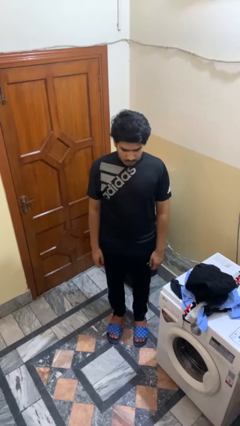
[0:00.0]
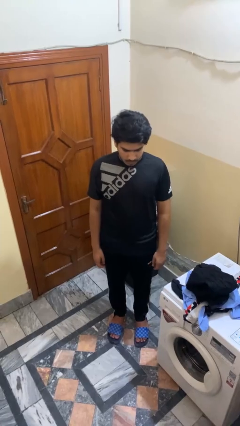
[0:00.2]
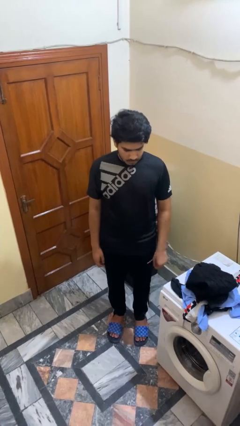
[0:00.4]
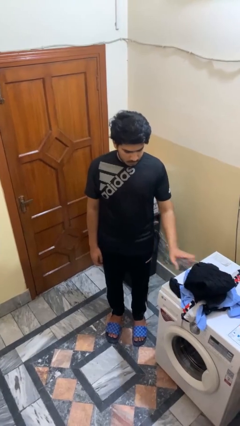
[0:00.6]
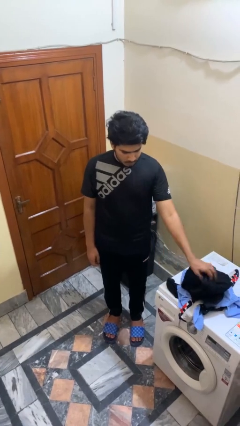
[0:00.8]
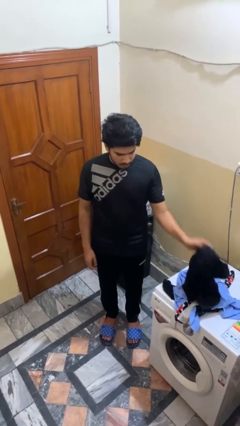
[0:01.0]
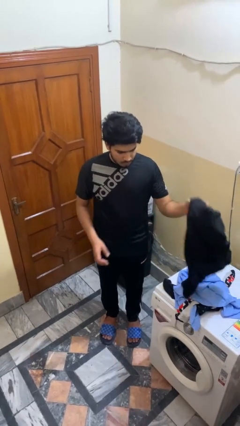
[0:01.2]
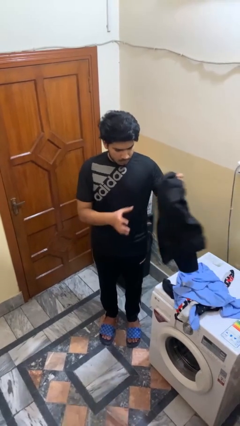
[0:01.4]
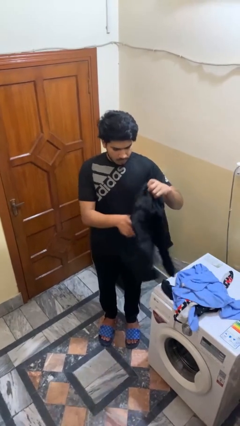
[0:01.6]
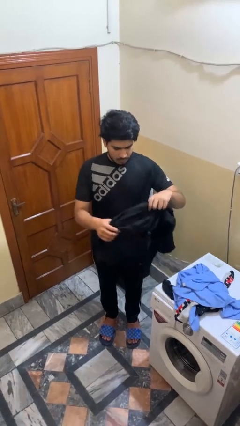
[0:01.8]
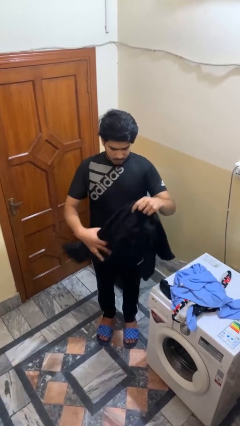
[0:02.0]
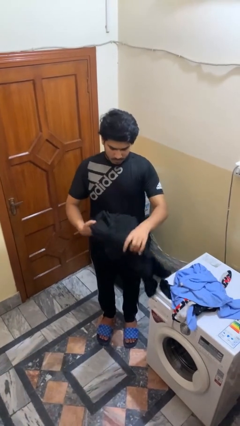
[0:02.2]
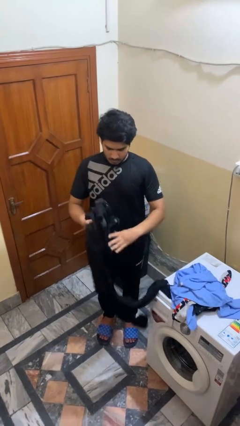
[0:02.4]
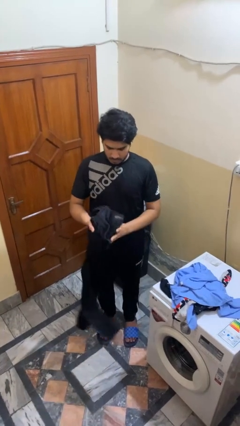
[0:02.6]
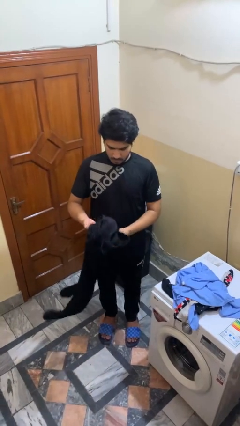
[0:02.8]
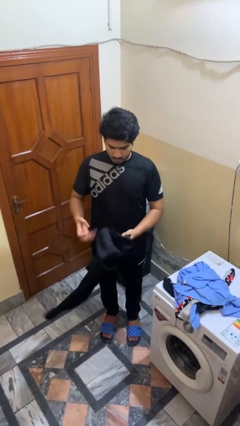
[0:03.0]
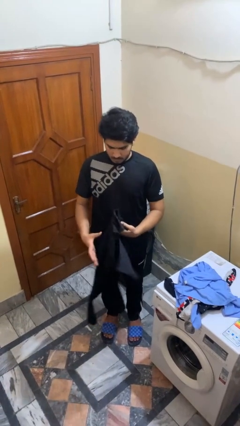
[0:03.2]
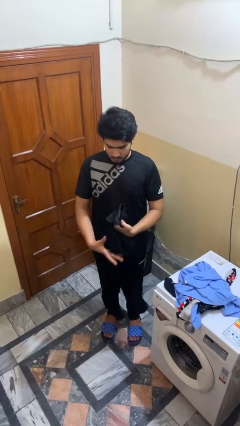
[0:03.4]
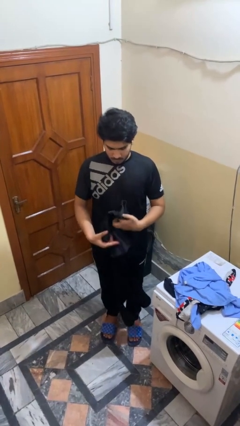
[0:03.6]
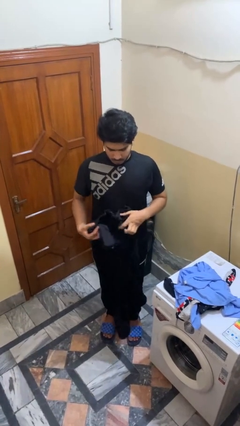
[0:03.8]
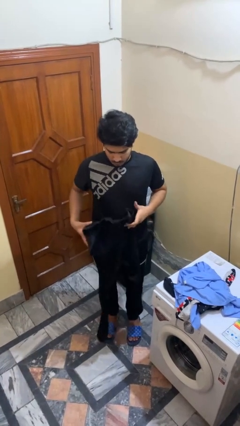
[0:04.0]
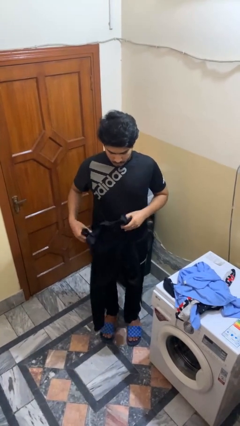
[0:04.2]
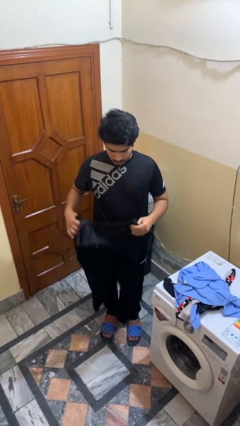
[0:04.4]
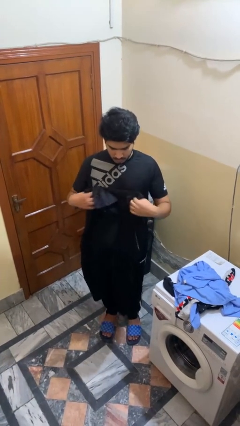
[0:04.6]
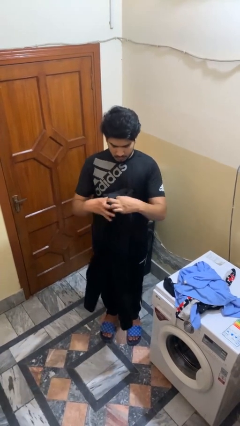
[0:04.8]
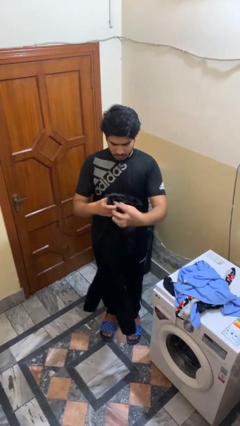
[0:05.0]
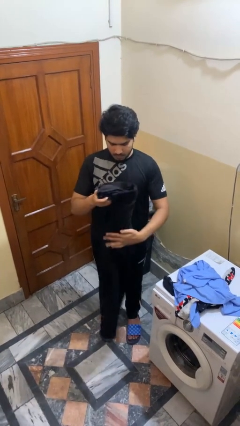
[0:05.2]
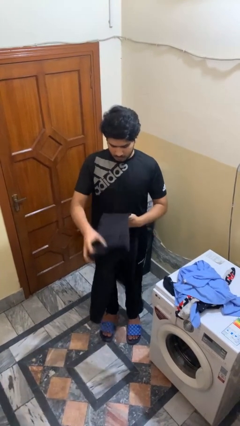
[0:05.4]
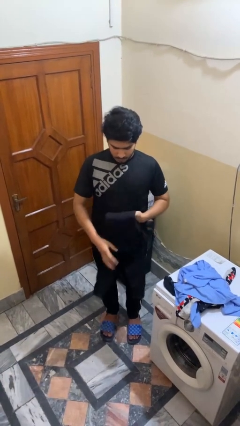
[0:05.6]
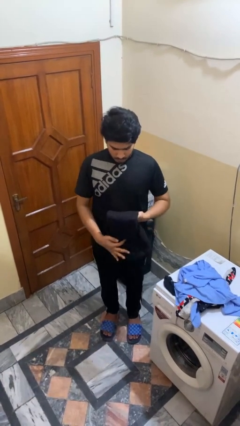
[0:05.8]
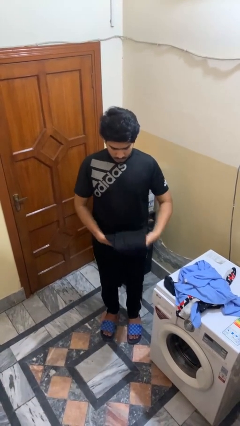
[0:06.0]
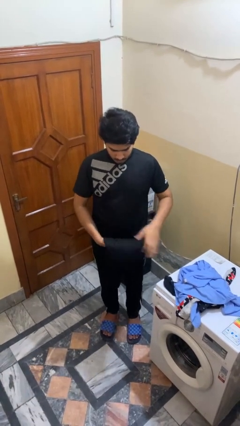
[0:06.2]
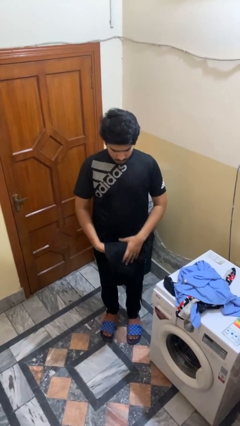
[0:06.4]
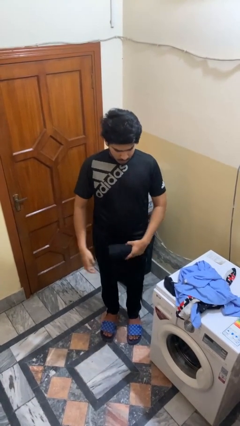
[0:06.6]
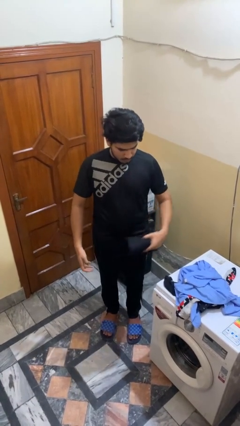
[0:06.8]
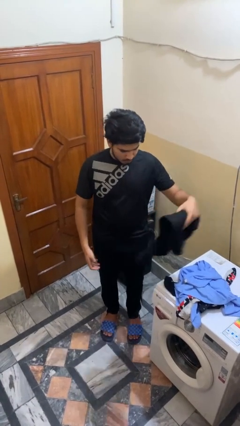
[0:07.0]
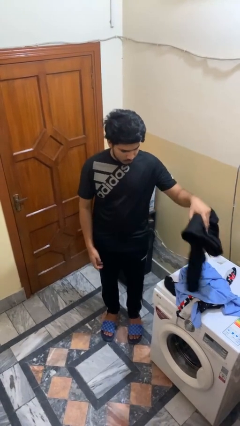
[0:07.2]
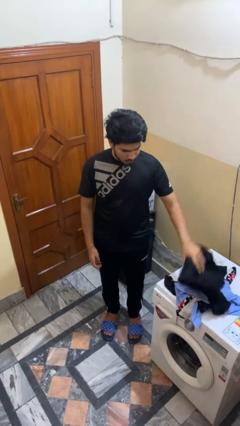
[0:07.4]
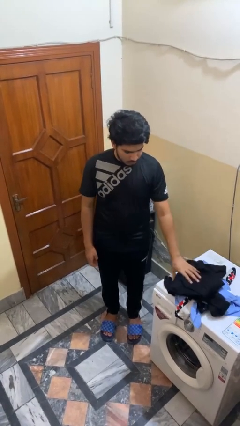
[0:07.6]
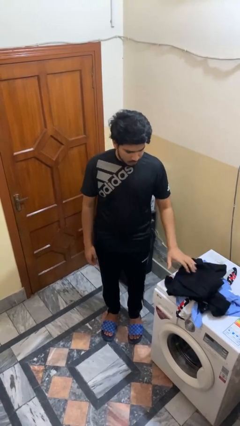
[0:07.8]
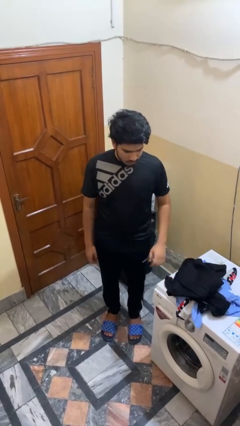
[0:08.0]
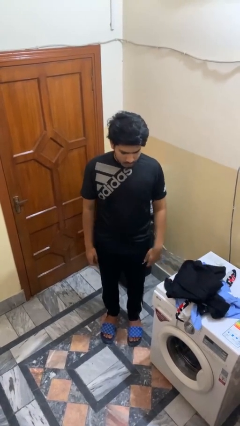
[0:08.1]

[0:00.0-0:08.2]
person folds pants

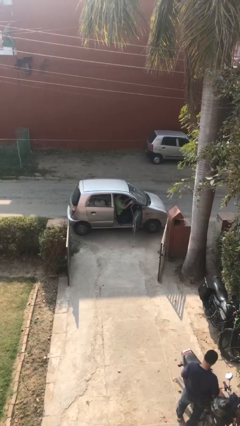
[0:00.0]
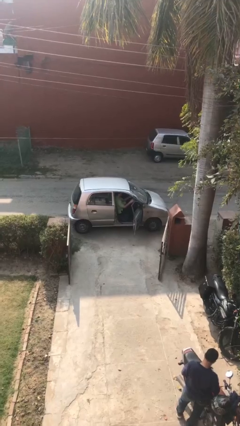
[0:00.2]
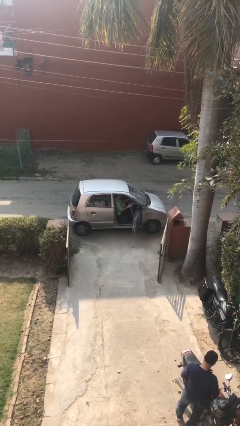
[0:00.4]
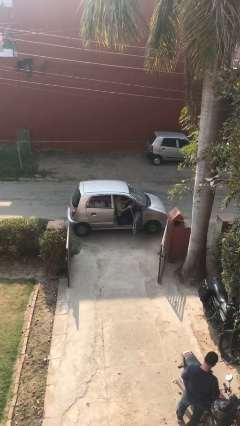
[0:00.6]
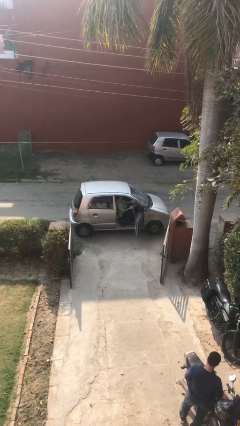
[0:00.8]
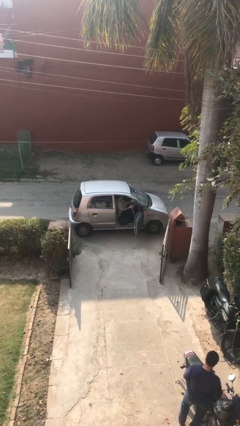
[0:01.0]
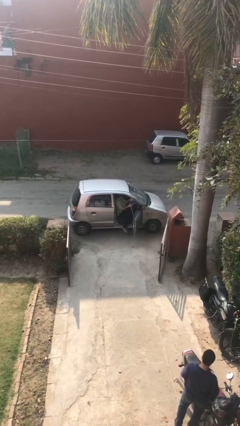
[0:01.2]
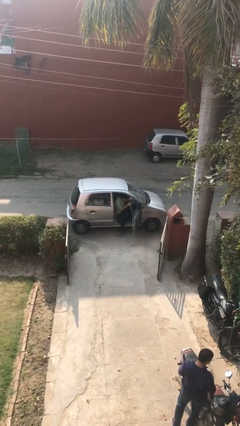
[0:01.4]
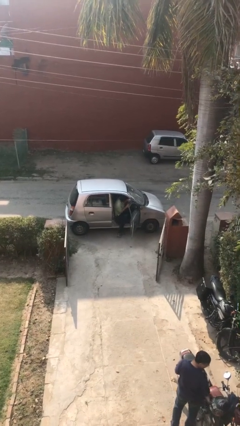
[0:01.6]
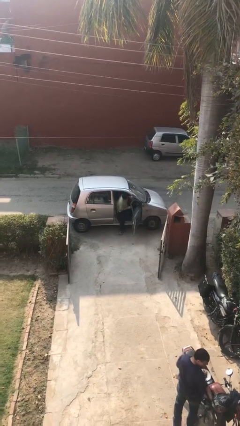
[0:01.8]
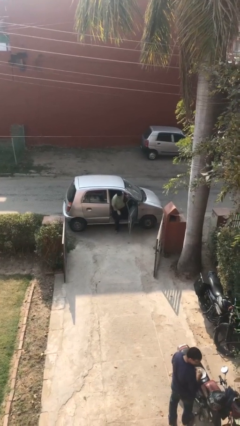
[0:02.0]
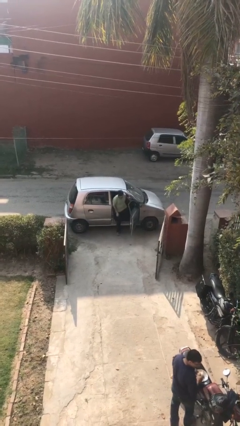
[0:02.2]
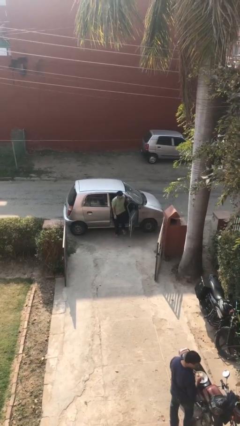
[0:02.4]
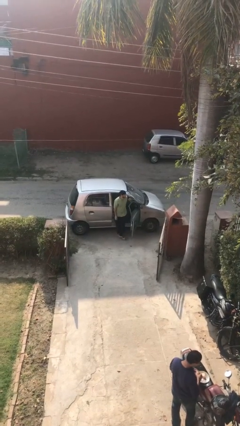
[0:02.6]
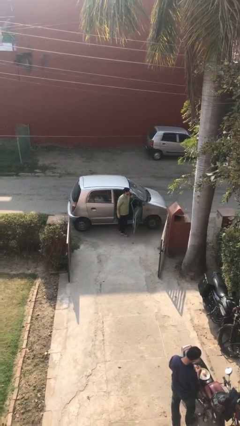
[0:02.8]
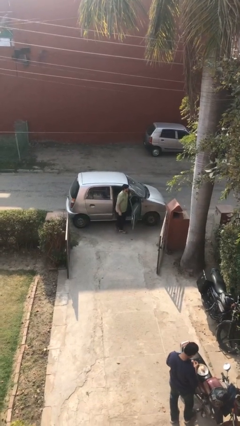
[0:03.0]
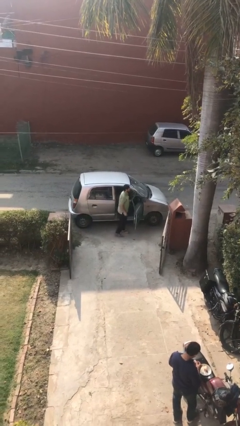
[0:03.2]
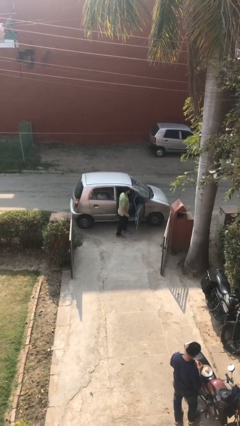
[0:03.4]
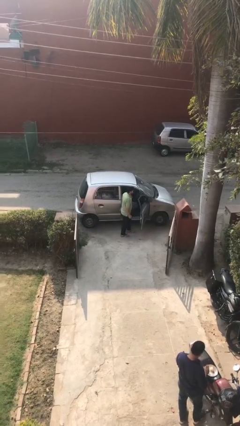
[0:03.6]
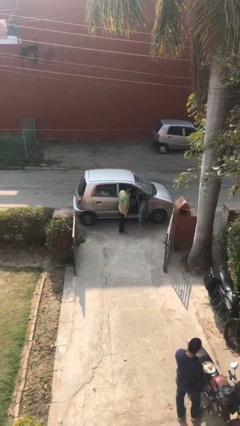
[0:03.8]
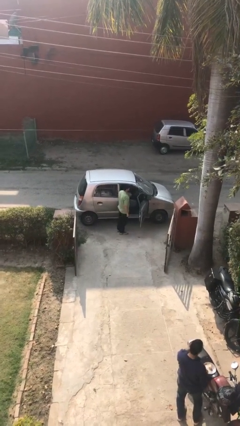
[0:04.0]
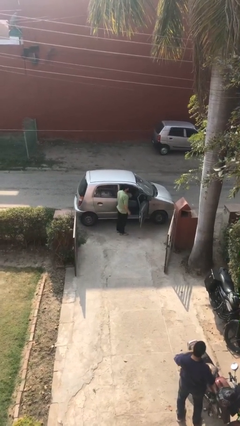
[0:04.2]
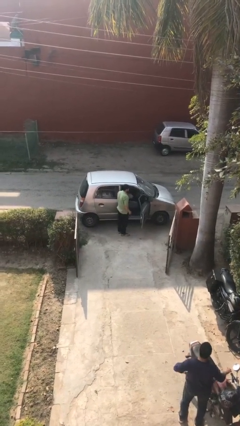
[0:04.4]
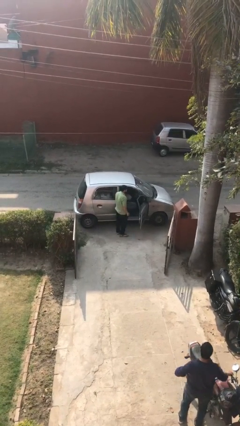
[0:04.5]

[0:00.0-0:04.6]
person exits car

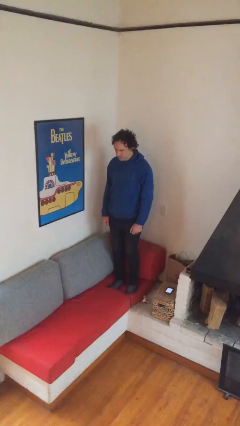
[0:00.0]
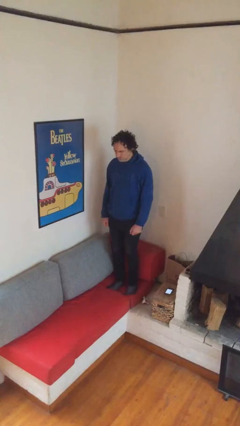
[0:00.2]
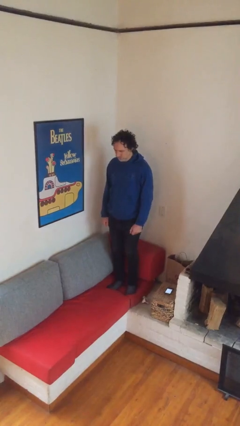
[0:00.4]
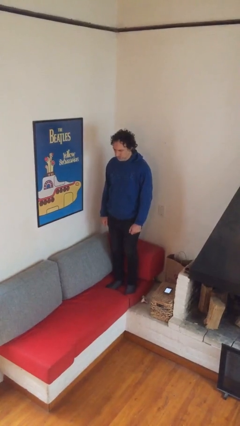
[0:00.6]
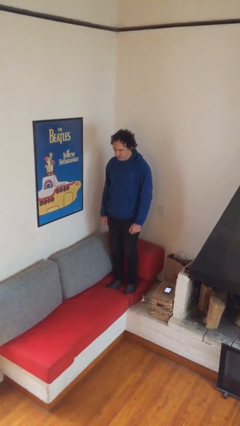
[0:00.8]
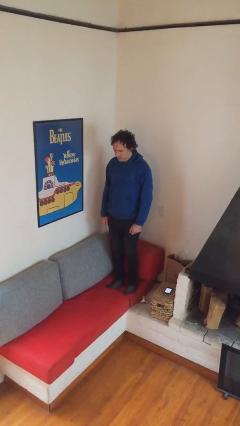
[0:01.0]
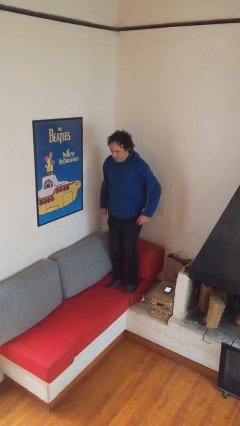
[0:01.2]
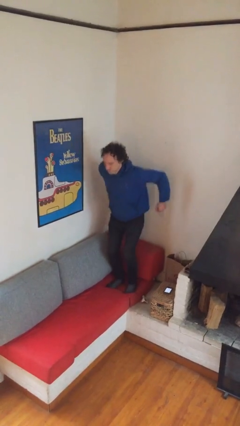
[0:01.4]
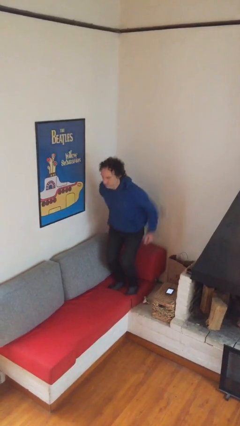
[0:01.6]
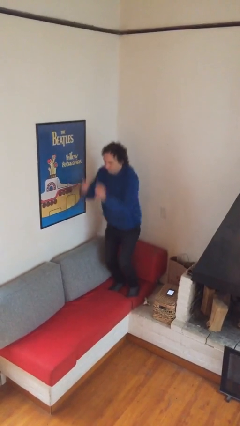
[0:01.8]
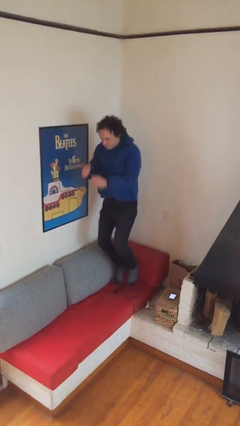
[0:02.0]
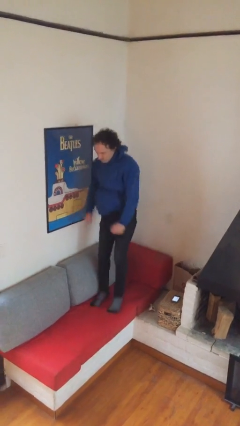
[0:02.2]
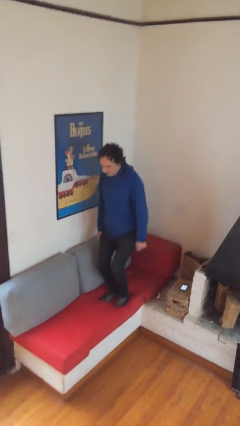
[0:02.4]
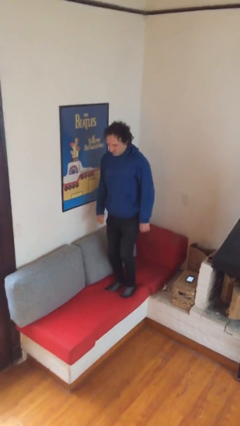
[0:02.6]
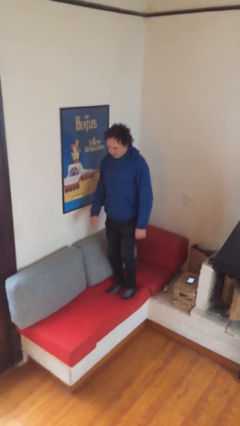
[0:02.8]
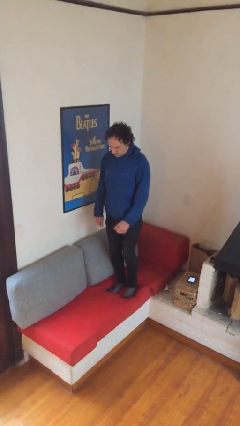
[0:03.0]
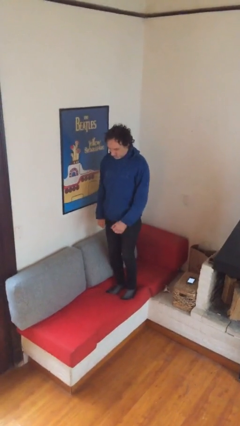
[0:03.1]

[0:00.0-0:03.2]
person jumps on couch

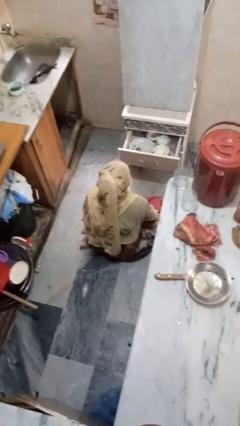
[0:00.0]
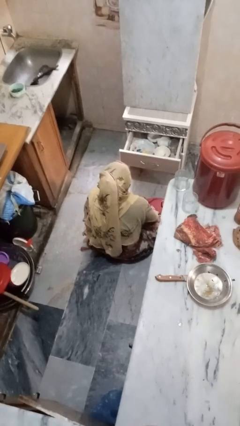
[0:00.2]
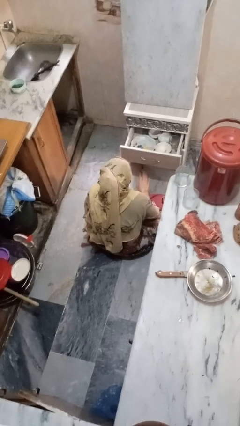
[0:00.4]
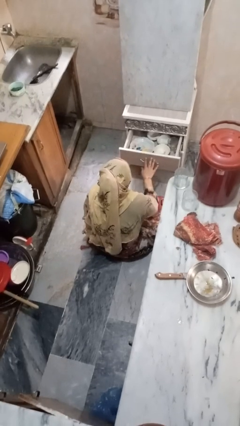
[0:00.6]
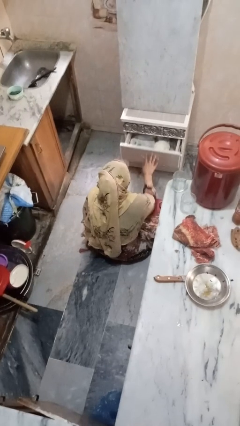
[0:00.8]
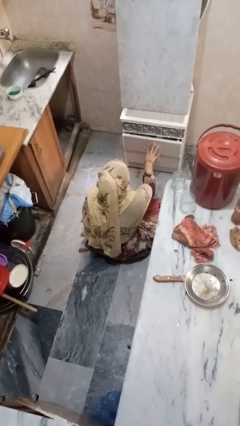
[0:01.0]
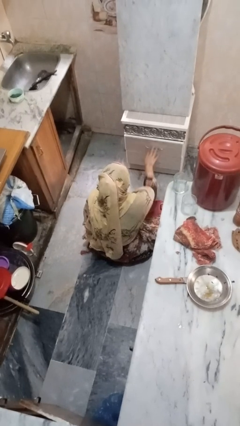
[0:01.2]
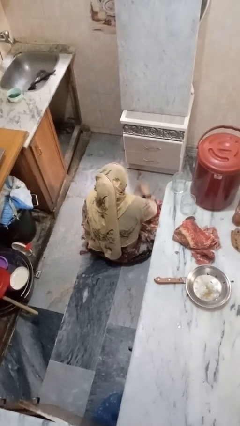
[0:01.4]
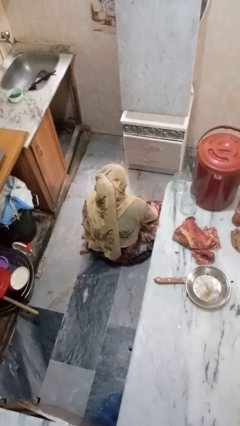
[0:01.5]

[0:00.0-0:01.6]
person closes kitchen drawer

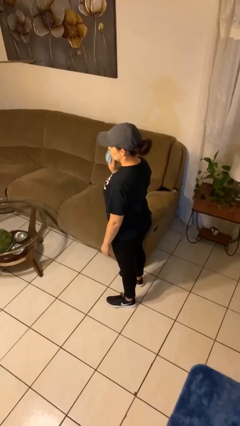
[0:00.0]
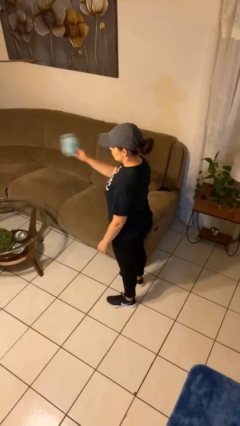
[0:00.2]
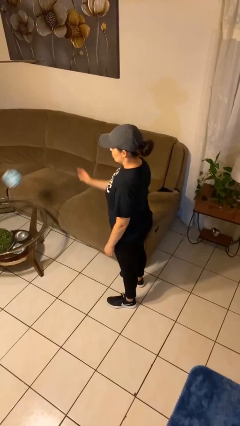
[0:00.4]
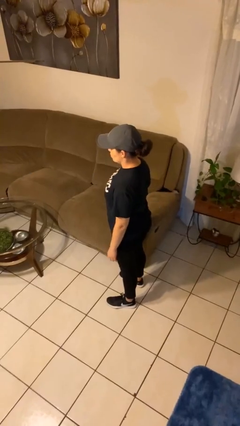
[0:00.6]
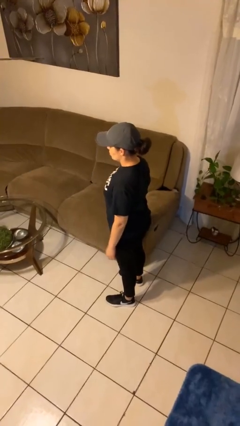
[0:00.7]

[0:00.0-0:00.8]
person throws object on table
